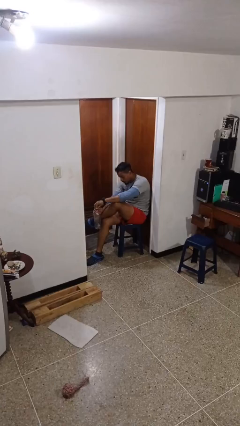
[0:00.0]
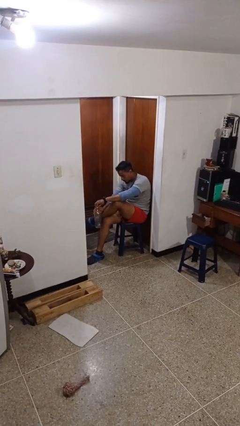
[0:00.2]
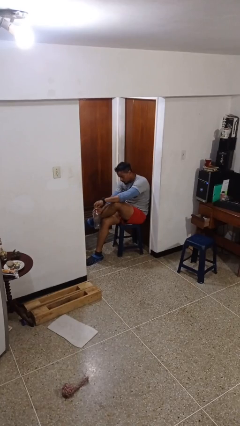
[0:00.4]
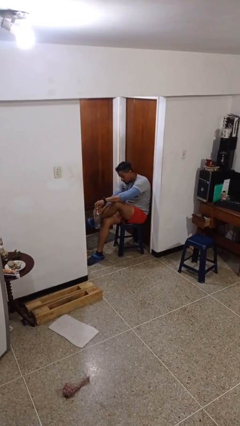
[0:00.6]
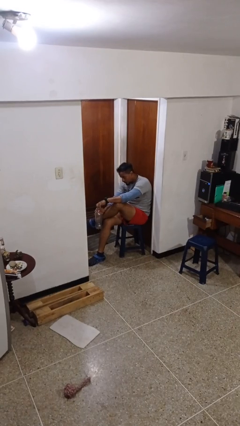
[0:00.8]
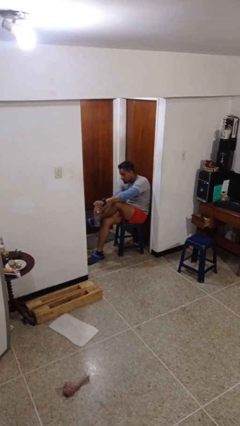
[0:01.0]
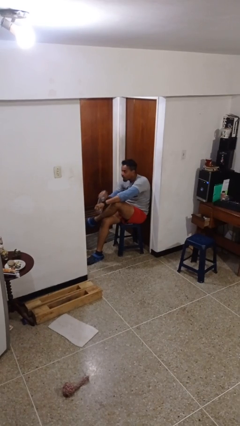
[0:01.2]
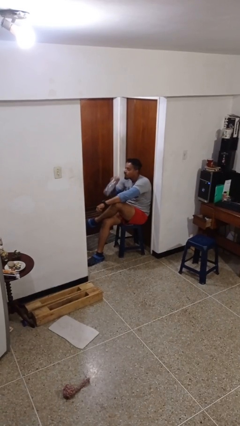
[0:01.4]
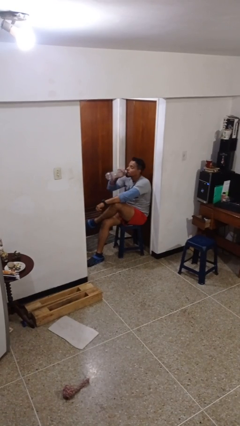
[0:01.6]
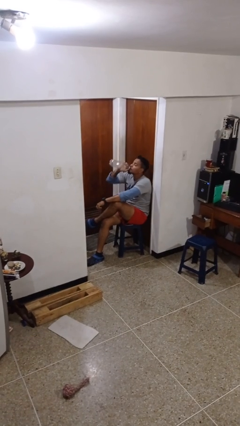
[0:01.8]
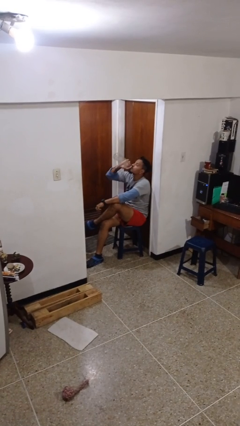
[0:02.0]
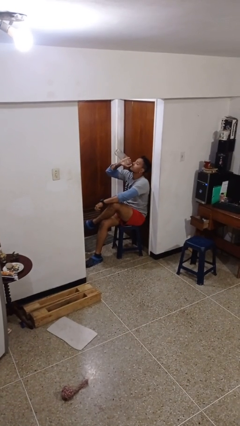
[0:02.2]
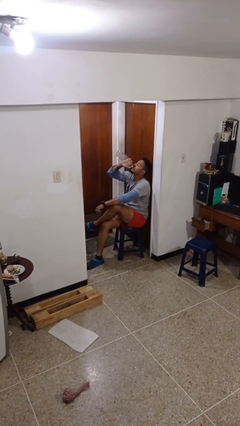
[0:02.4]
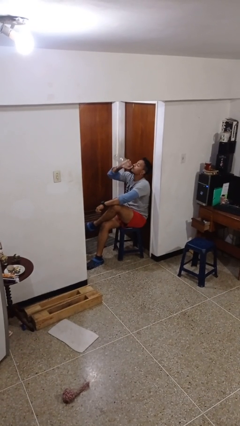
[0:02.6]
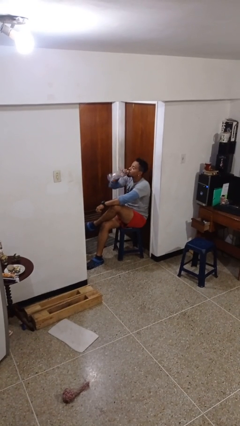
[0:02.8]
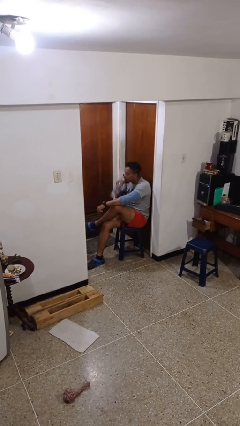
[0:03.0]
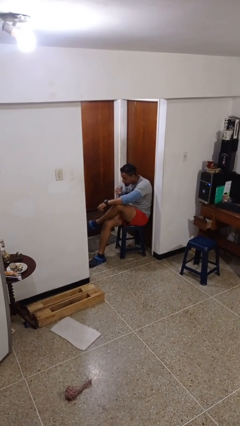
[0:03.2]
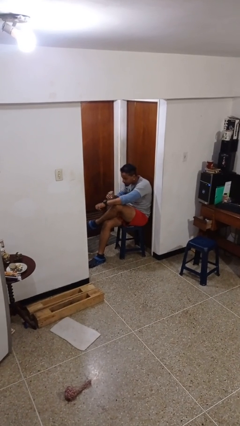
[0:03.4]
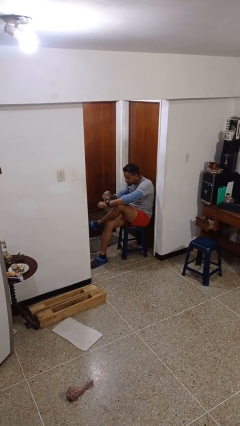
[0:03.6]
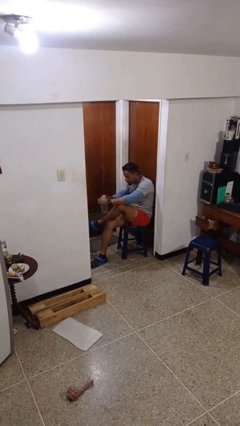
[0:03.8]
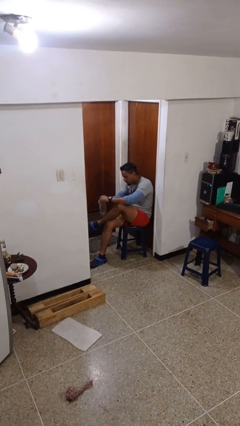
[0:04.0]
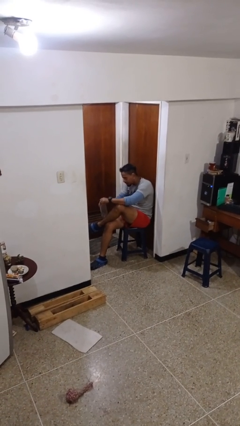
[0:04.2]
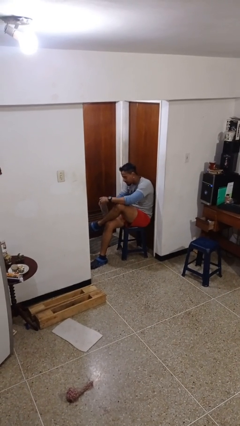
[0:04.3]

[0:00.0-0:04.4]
person drinks from bottle

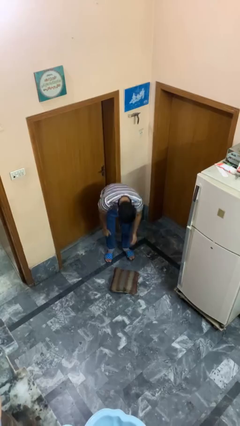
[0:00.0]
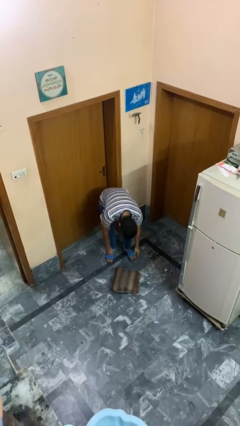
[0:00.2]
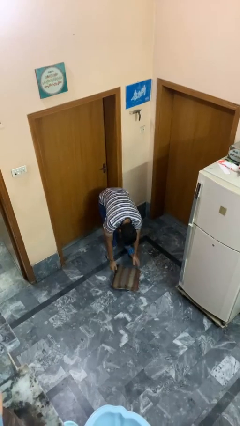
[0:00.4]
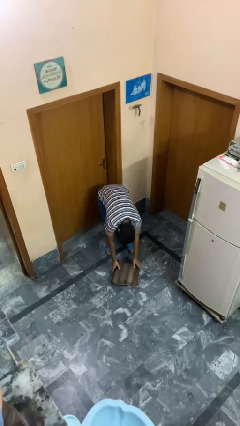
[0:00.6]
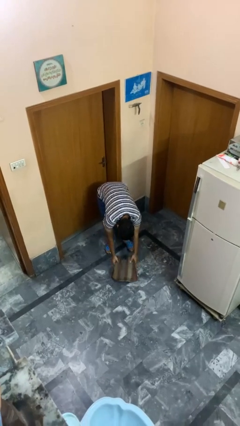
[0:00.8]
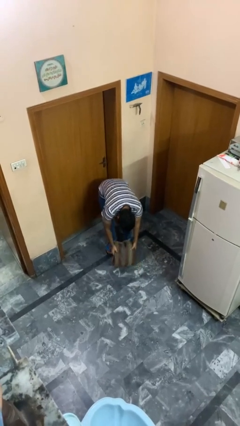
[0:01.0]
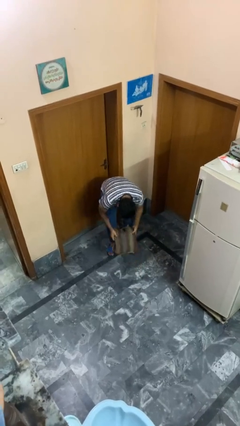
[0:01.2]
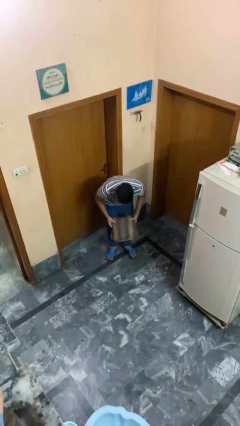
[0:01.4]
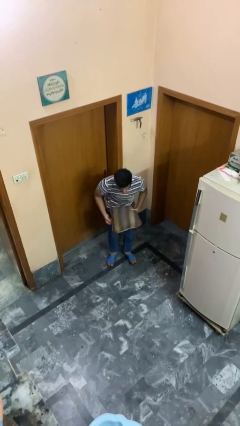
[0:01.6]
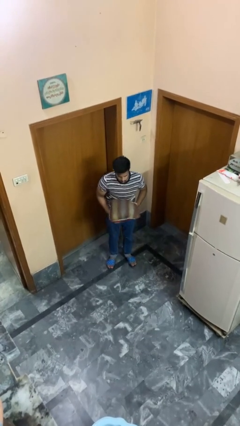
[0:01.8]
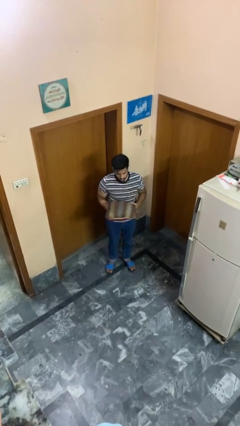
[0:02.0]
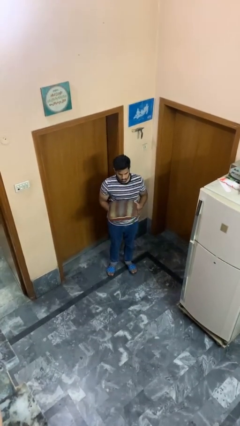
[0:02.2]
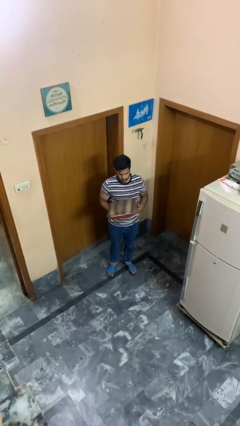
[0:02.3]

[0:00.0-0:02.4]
person picks up object from floor

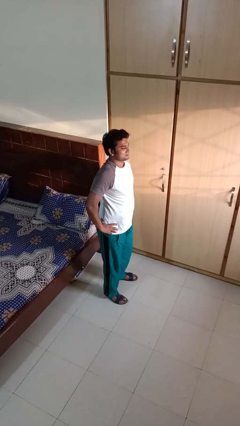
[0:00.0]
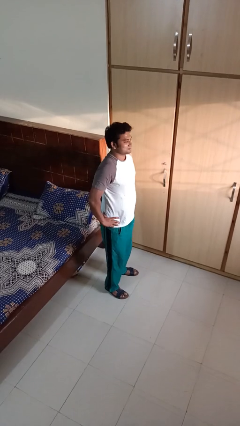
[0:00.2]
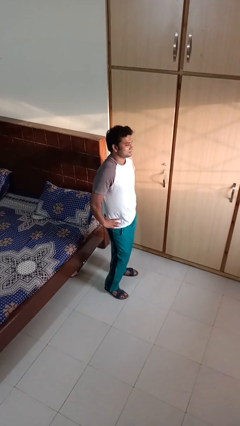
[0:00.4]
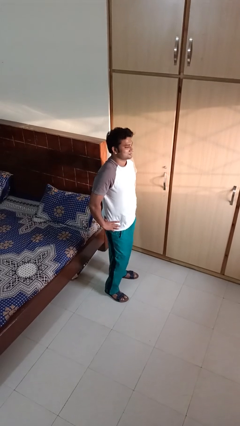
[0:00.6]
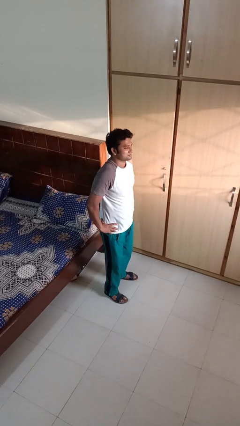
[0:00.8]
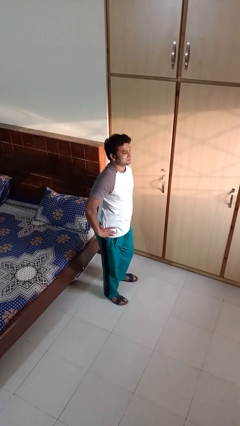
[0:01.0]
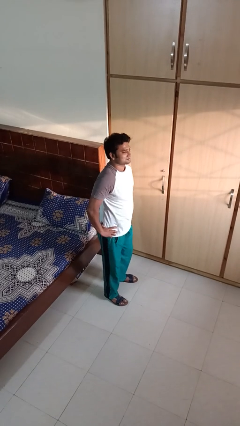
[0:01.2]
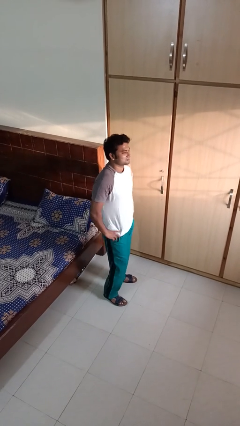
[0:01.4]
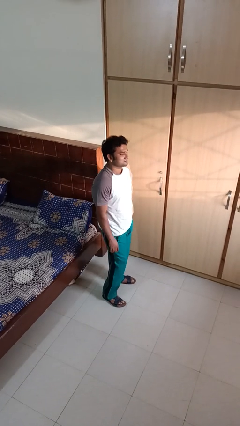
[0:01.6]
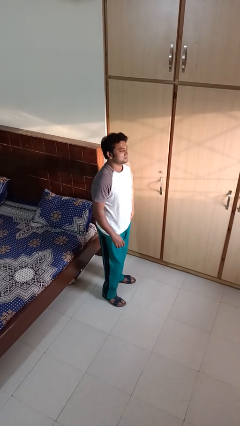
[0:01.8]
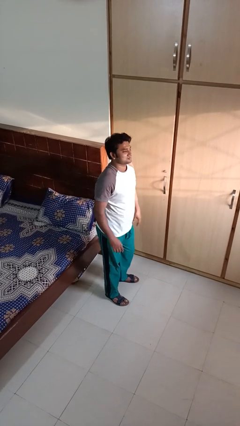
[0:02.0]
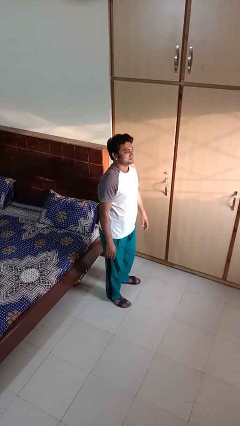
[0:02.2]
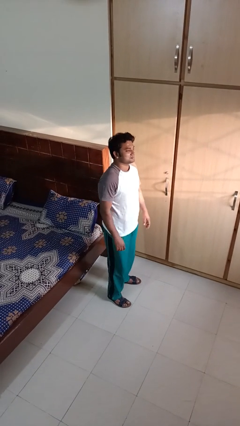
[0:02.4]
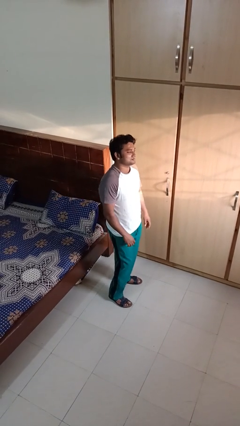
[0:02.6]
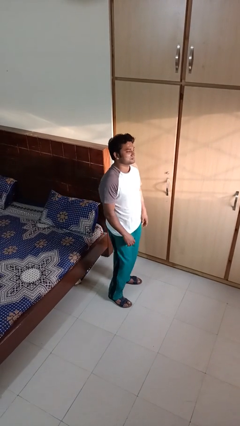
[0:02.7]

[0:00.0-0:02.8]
person wiggles hips

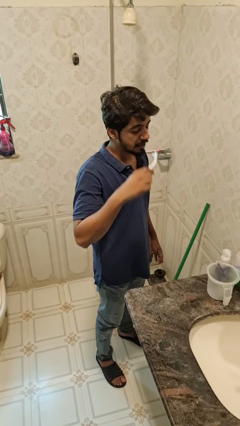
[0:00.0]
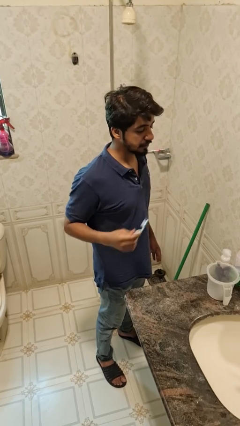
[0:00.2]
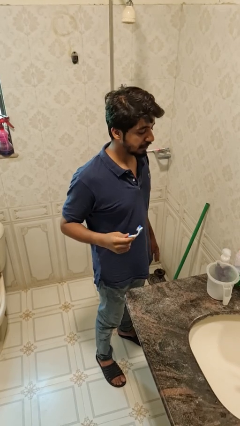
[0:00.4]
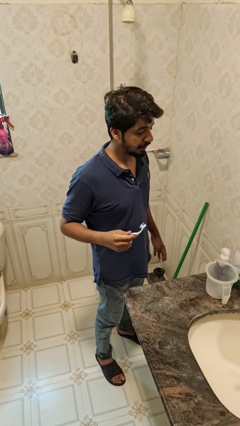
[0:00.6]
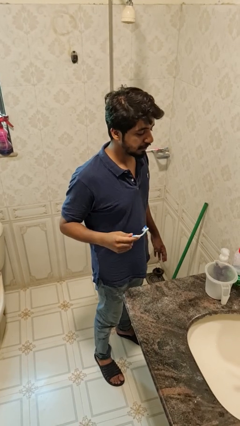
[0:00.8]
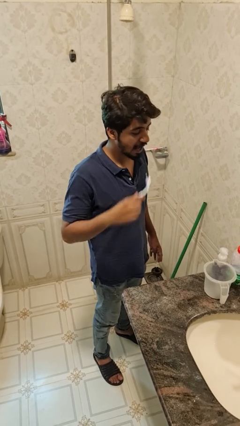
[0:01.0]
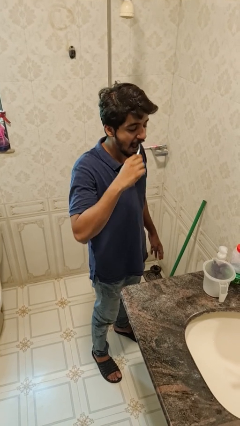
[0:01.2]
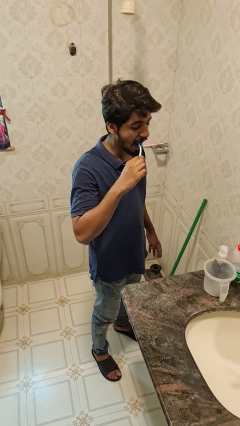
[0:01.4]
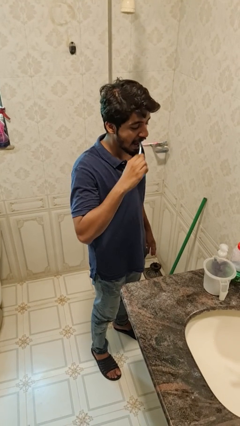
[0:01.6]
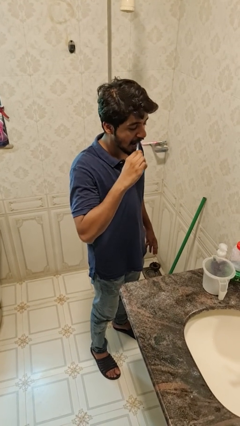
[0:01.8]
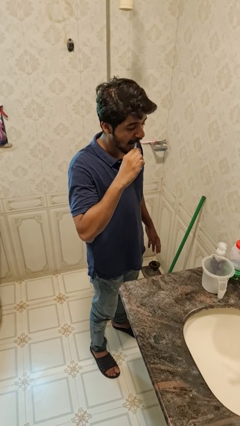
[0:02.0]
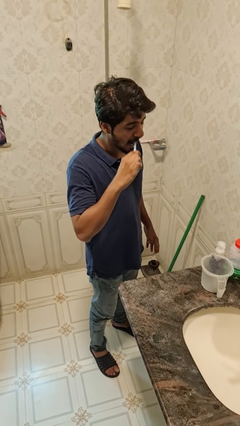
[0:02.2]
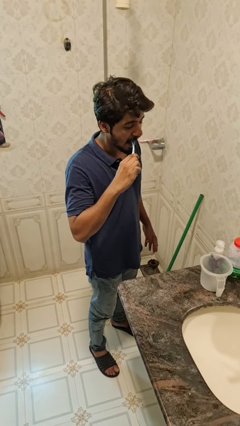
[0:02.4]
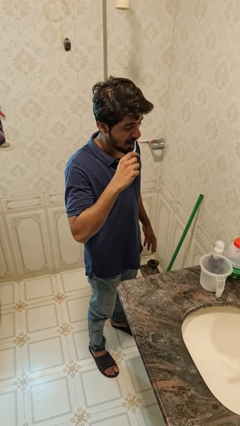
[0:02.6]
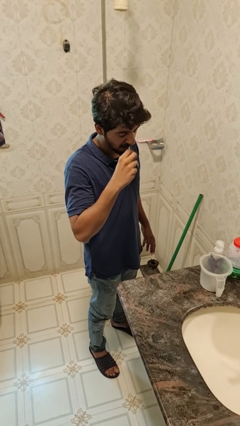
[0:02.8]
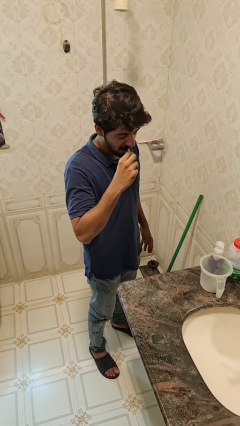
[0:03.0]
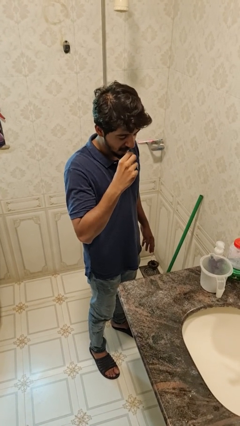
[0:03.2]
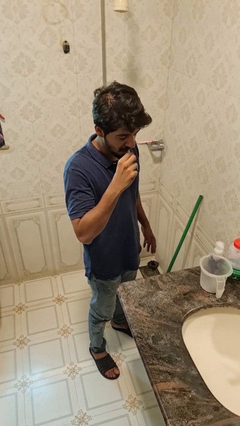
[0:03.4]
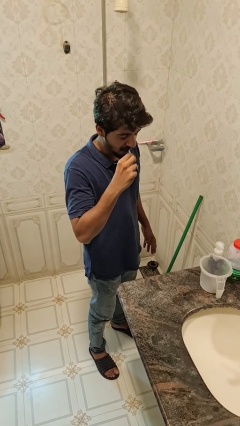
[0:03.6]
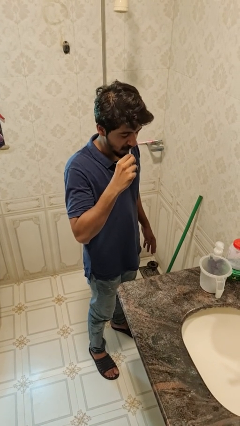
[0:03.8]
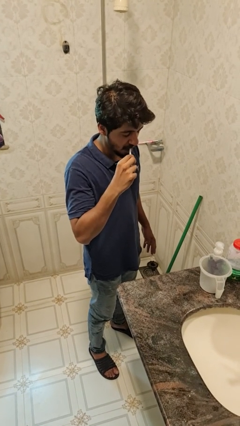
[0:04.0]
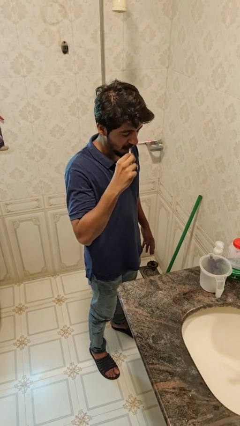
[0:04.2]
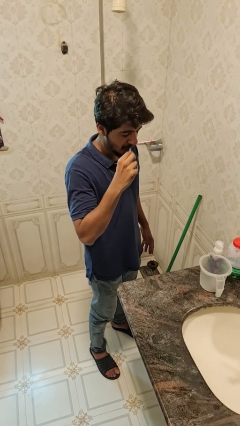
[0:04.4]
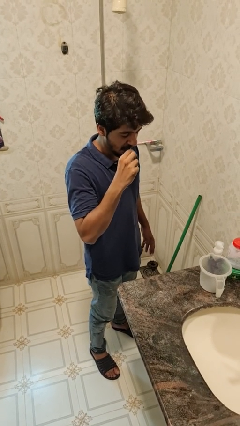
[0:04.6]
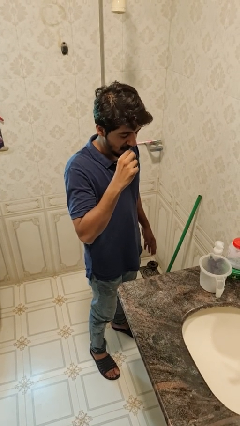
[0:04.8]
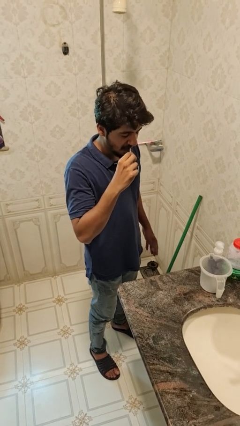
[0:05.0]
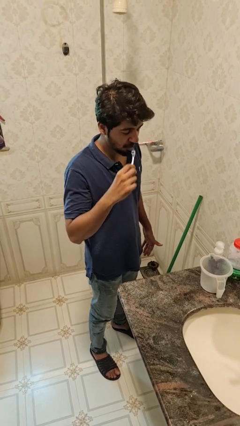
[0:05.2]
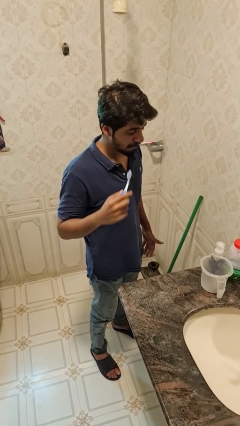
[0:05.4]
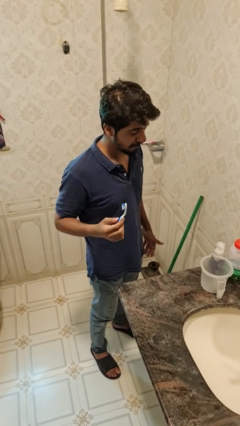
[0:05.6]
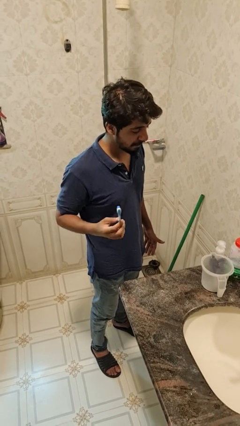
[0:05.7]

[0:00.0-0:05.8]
person brushes teeth

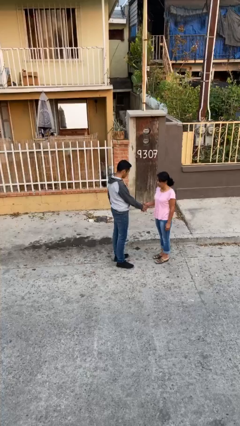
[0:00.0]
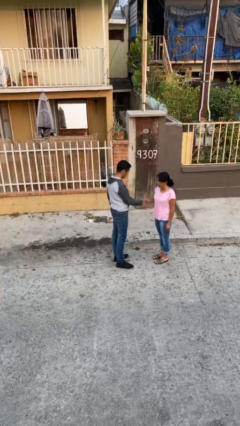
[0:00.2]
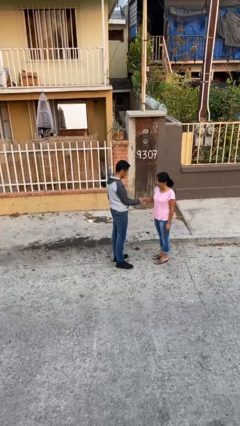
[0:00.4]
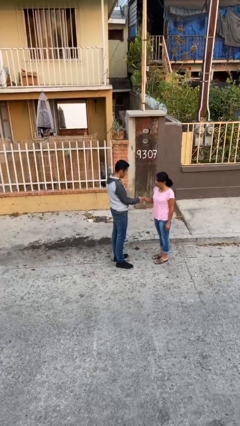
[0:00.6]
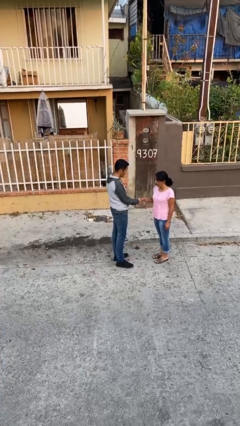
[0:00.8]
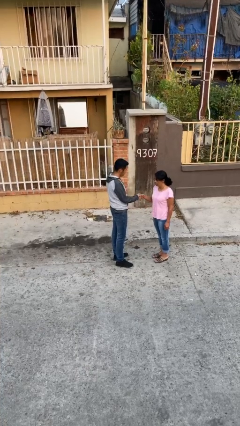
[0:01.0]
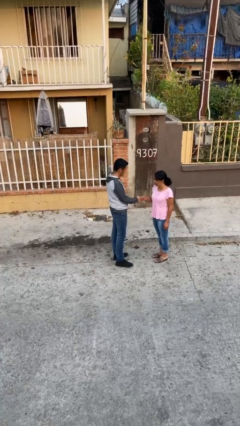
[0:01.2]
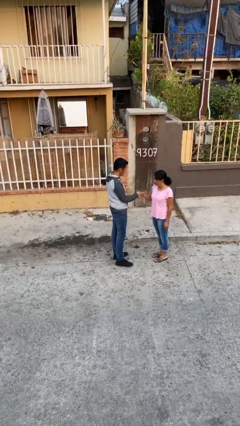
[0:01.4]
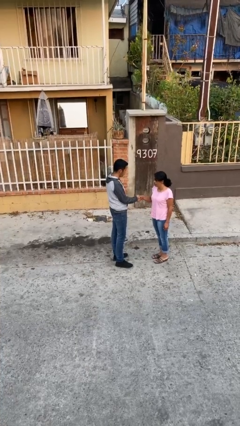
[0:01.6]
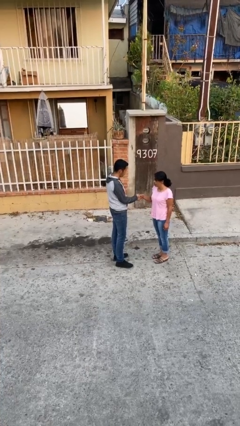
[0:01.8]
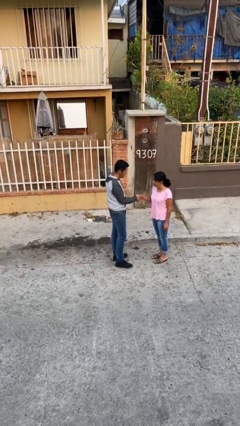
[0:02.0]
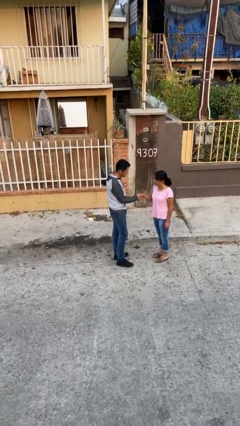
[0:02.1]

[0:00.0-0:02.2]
person shakes hand
